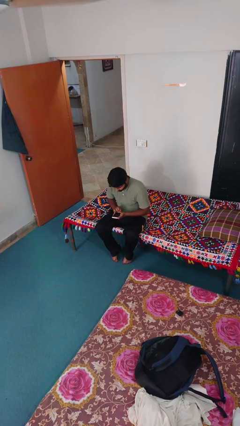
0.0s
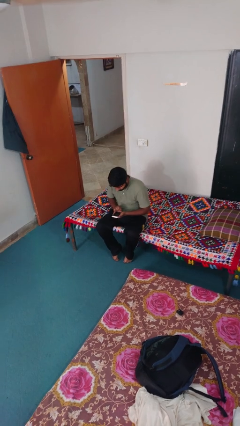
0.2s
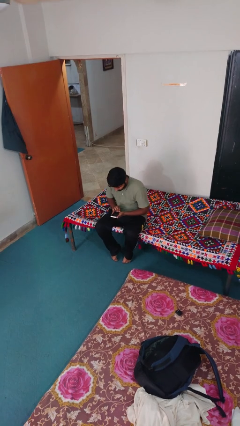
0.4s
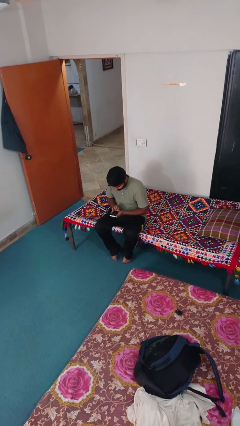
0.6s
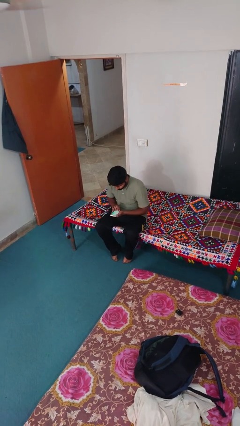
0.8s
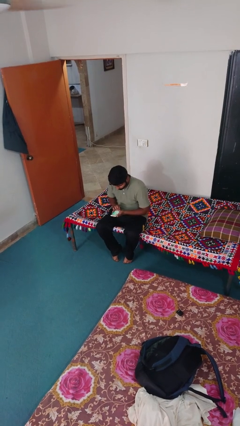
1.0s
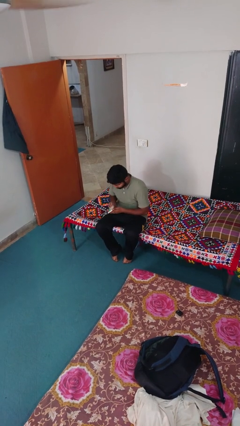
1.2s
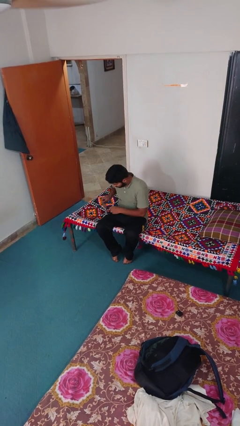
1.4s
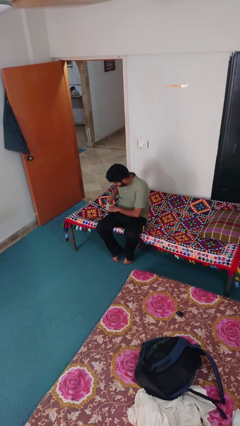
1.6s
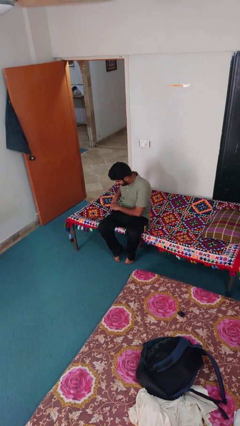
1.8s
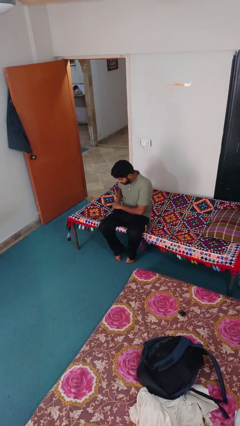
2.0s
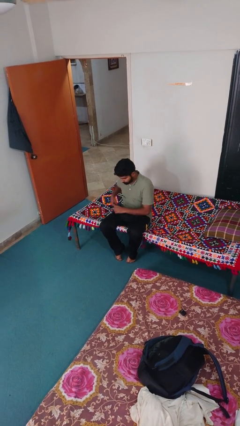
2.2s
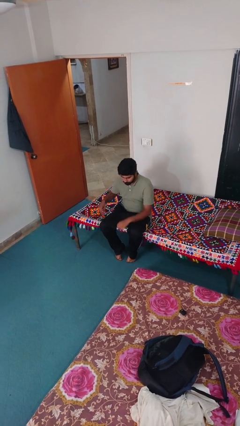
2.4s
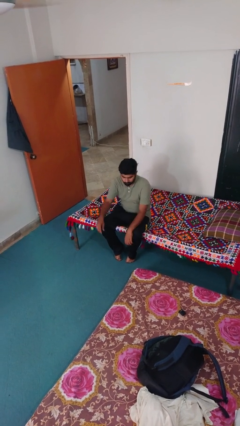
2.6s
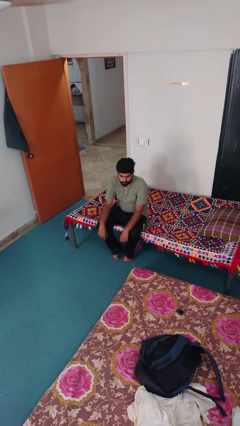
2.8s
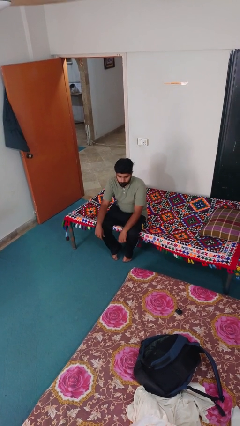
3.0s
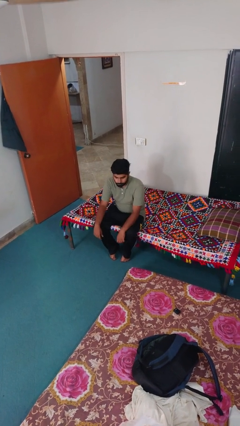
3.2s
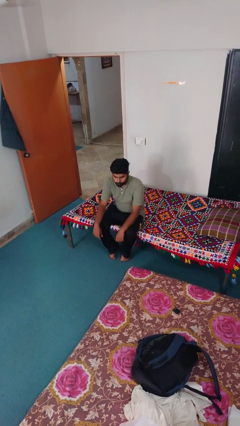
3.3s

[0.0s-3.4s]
person puts phone into pocket

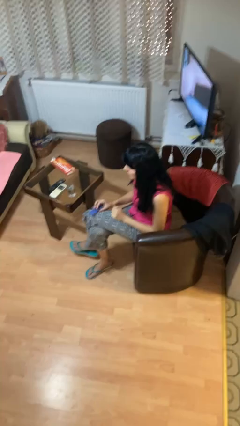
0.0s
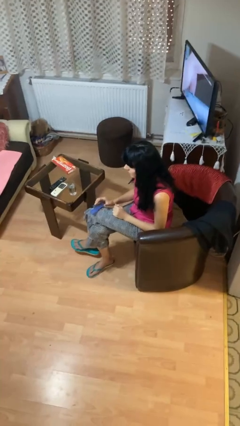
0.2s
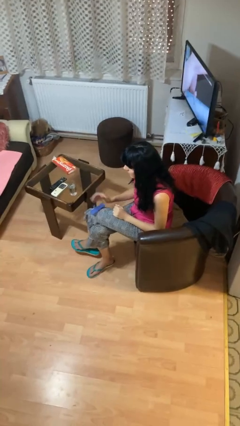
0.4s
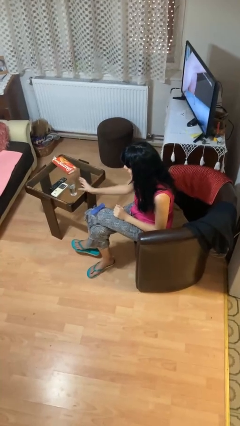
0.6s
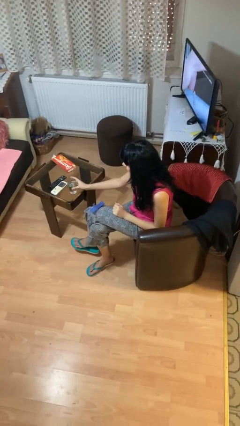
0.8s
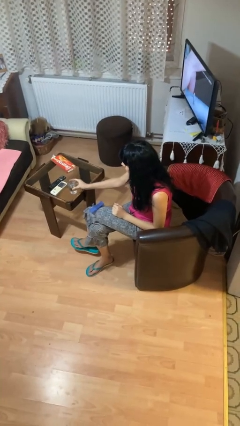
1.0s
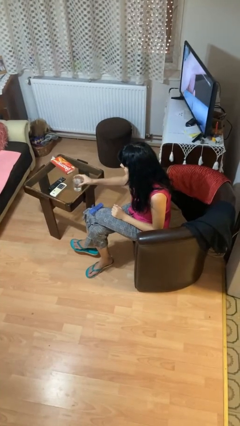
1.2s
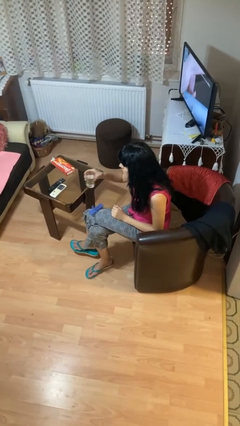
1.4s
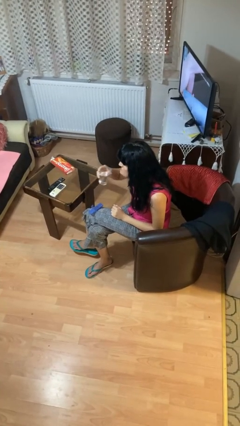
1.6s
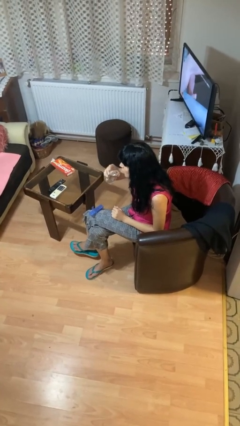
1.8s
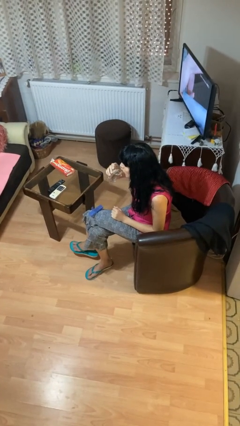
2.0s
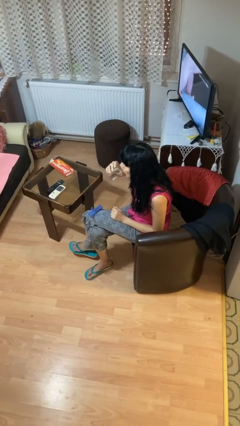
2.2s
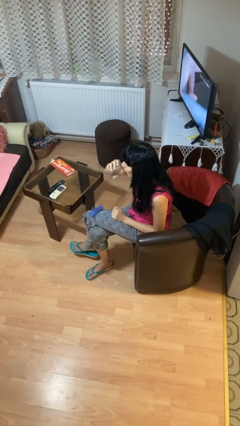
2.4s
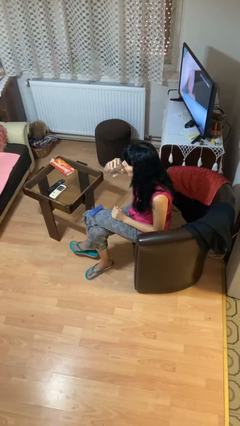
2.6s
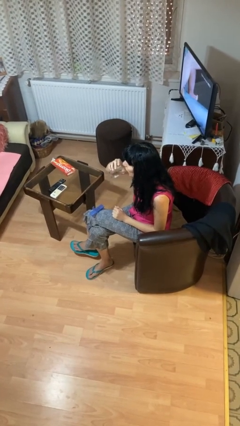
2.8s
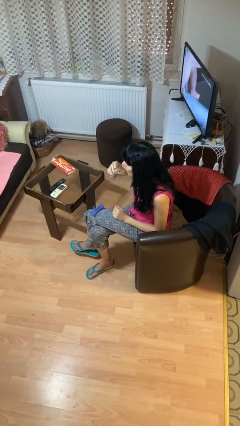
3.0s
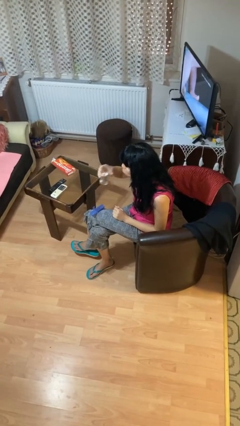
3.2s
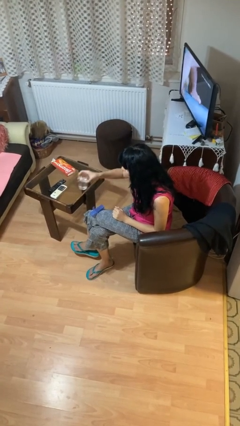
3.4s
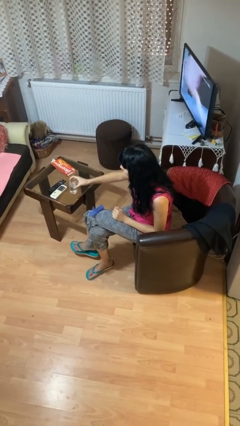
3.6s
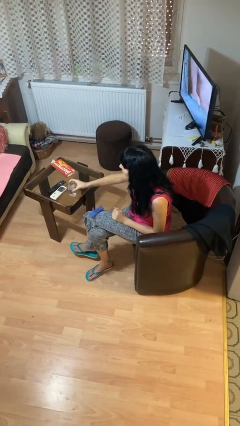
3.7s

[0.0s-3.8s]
person drinks from cup

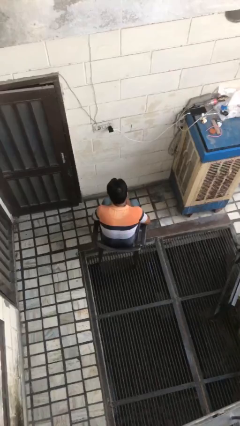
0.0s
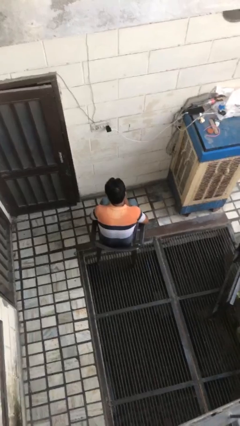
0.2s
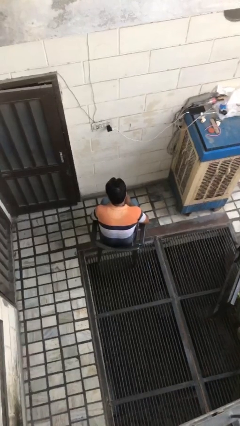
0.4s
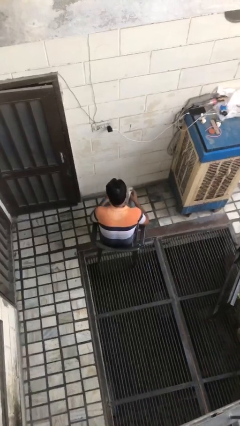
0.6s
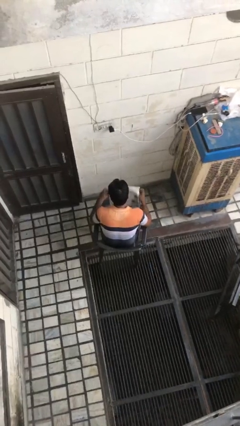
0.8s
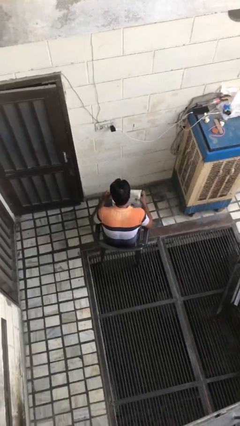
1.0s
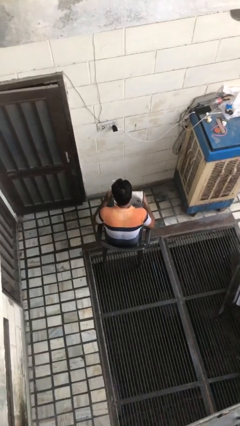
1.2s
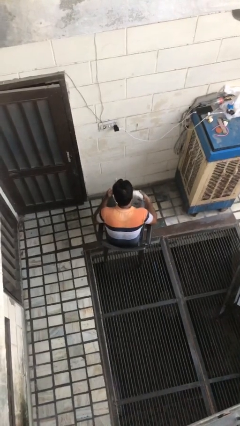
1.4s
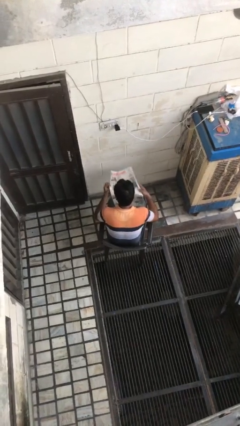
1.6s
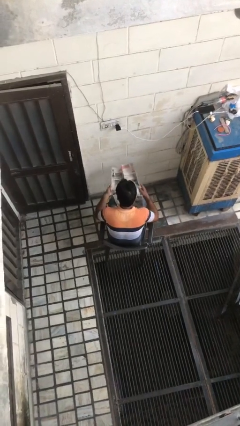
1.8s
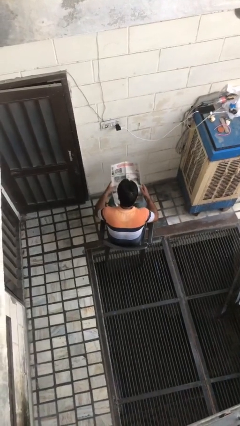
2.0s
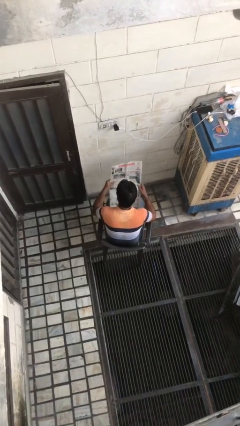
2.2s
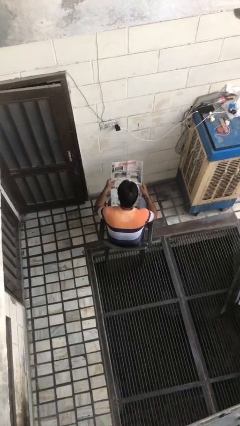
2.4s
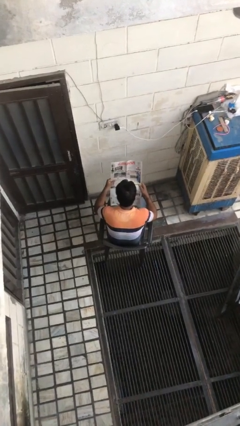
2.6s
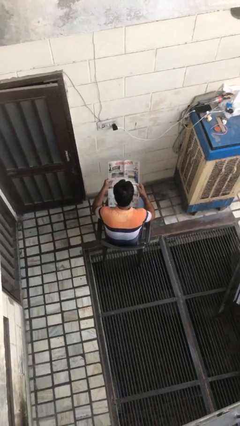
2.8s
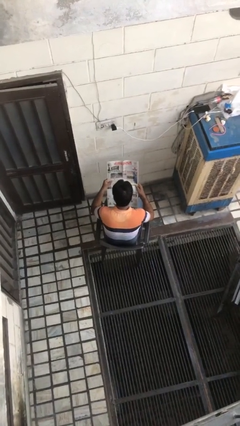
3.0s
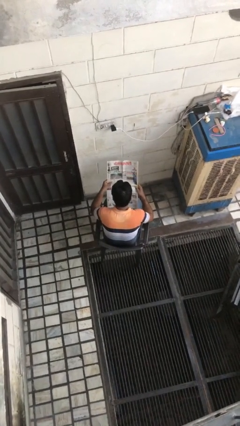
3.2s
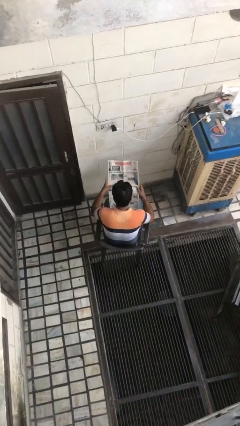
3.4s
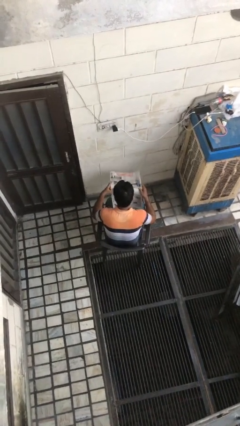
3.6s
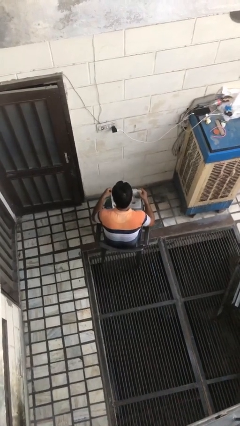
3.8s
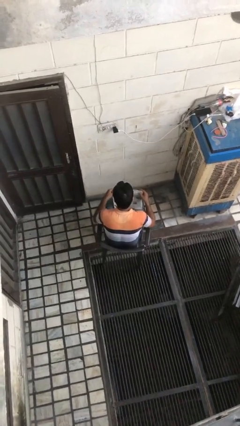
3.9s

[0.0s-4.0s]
person reads newspaper

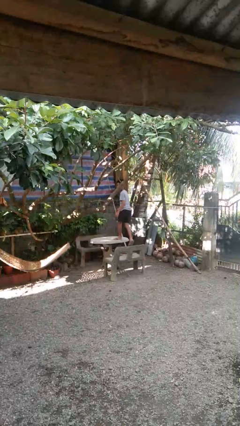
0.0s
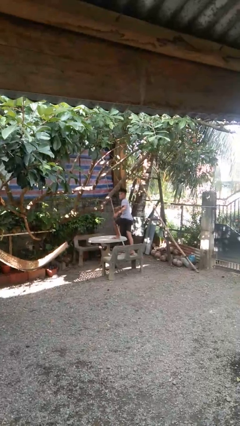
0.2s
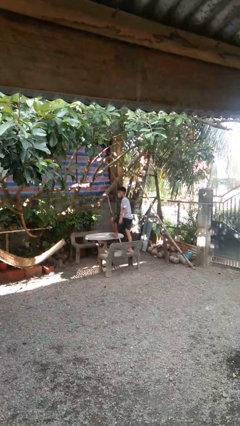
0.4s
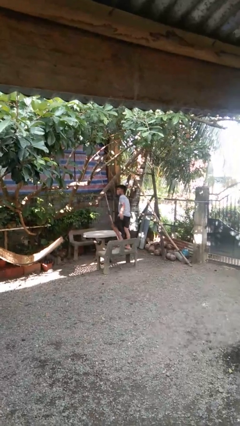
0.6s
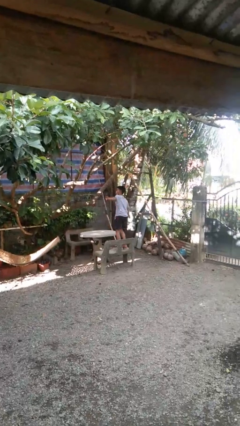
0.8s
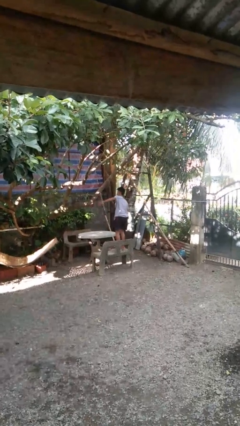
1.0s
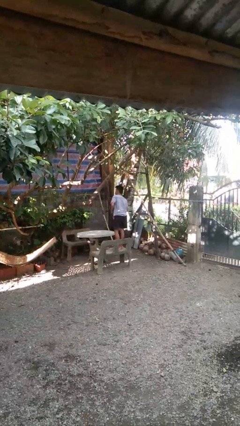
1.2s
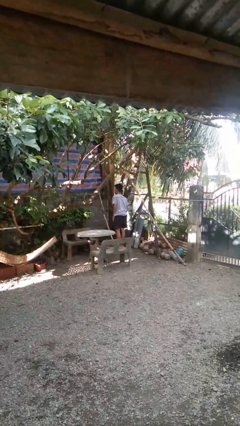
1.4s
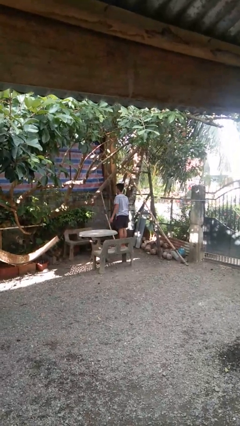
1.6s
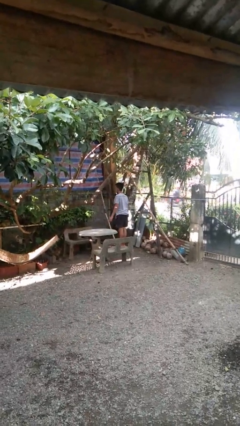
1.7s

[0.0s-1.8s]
person climbs off table

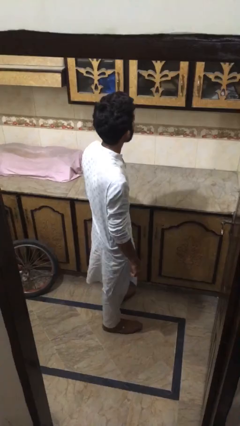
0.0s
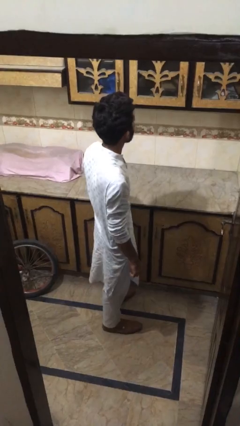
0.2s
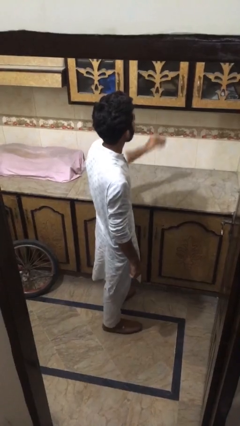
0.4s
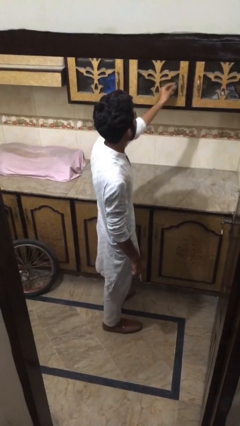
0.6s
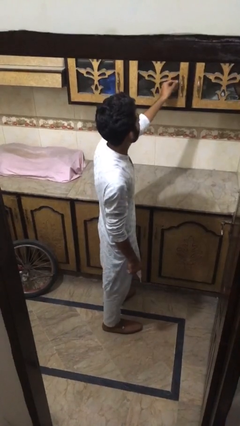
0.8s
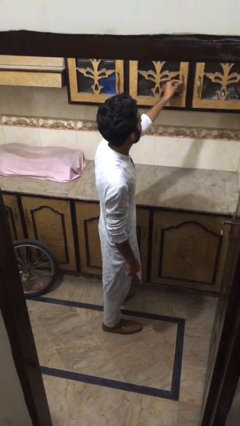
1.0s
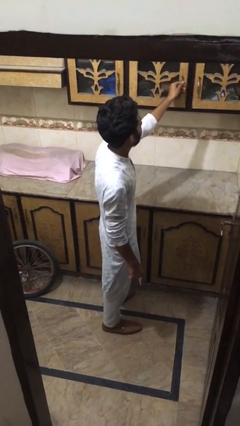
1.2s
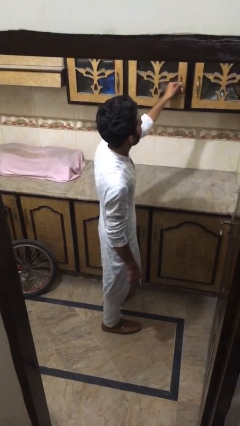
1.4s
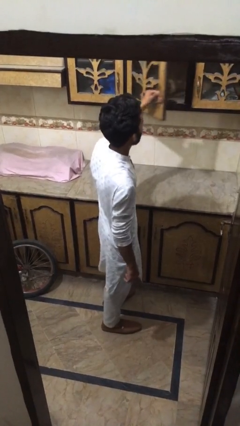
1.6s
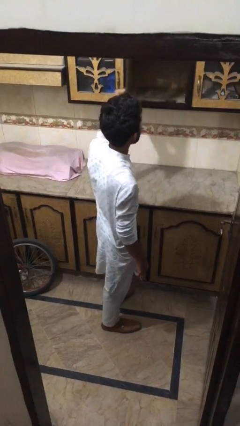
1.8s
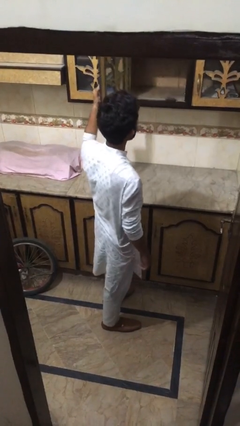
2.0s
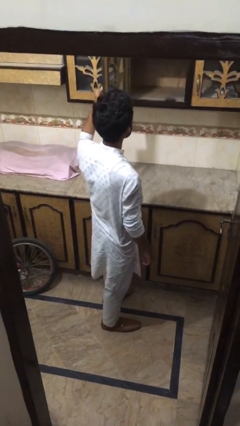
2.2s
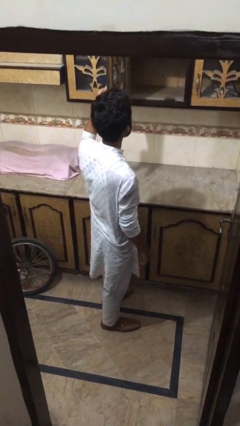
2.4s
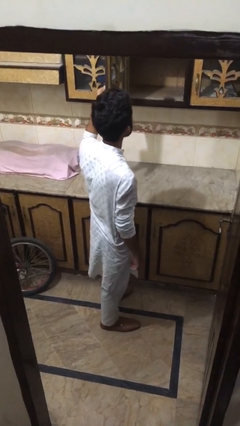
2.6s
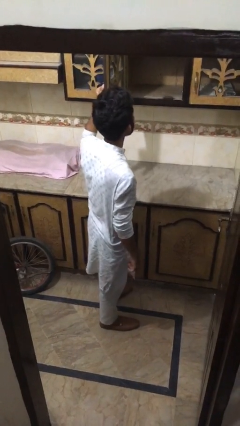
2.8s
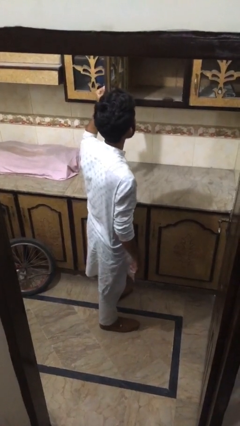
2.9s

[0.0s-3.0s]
person opens cabinet

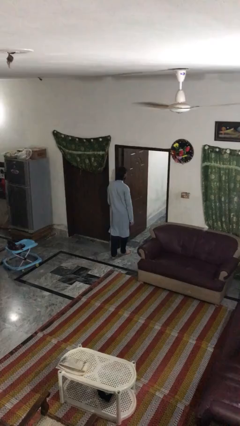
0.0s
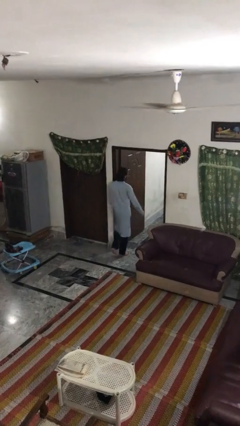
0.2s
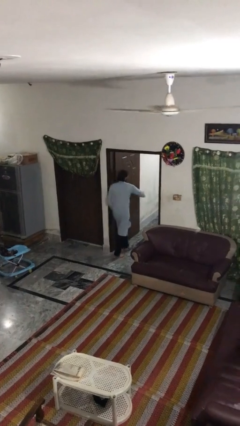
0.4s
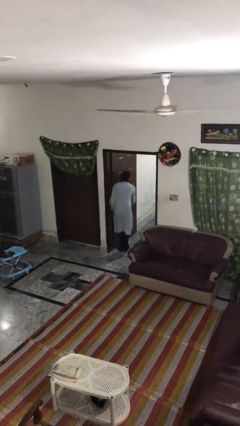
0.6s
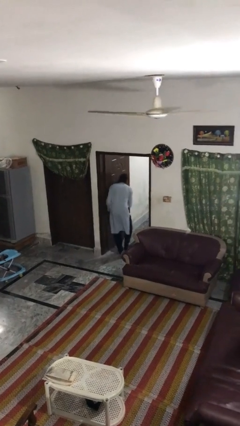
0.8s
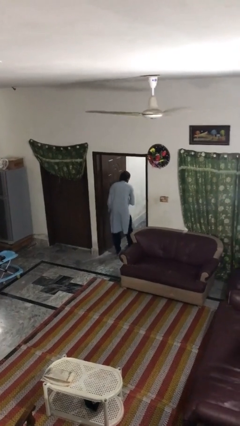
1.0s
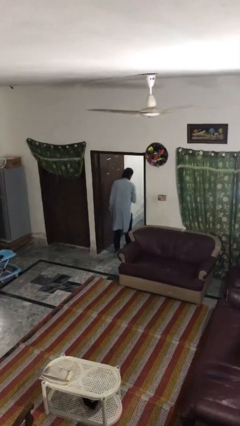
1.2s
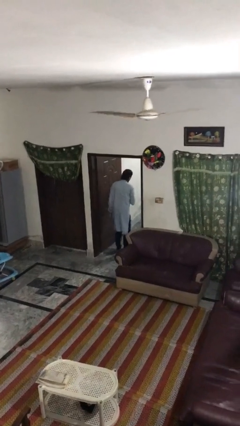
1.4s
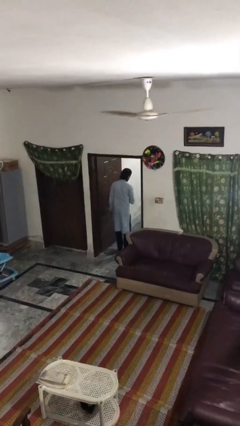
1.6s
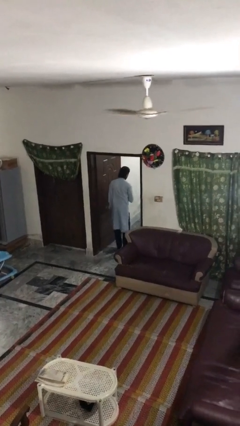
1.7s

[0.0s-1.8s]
person bumps into wall
